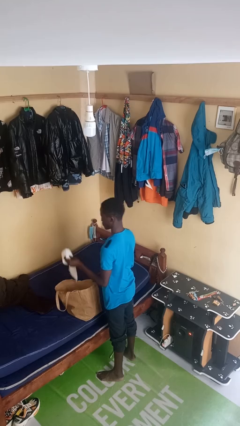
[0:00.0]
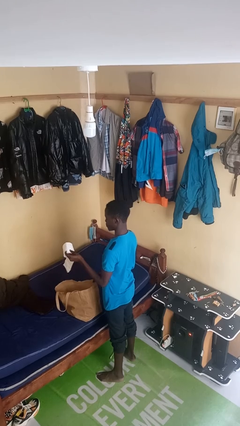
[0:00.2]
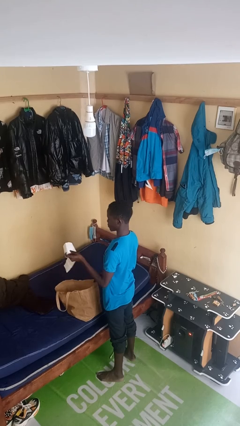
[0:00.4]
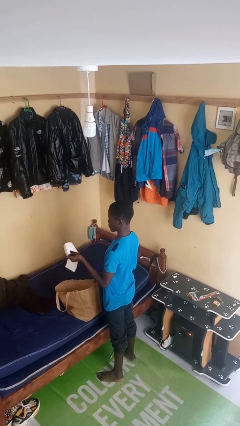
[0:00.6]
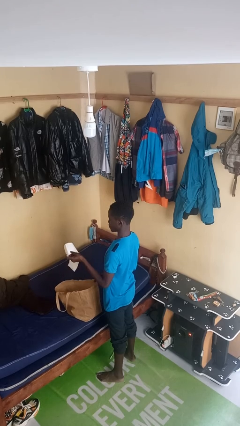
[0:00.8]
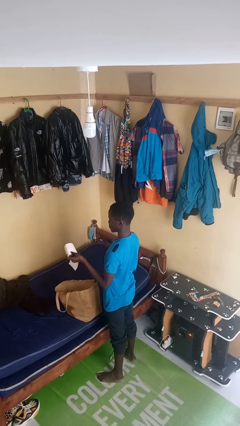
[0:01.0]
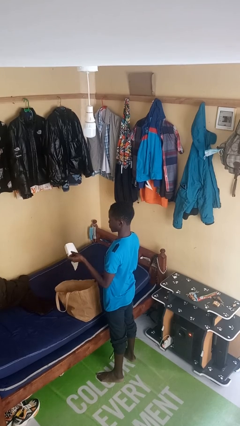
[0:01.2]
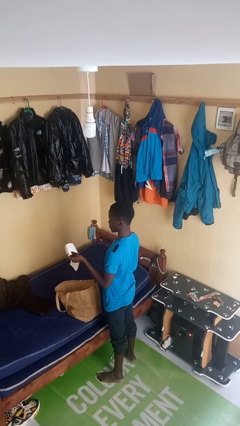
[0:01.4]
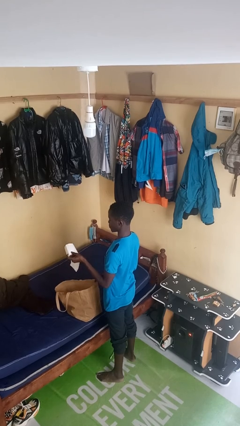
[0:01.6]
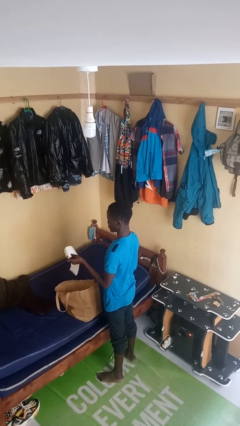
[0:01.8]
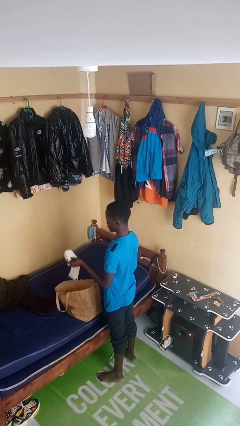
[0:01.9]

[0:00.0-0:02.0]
person takes object from bag

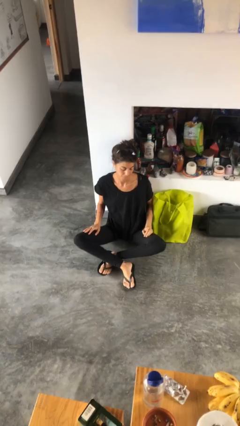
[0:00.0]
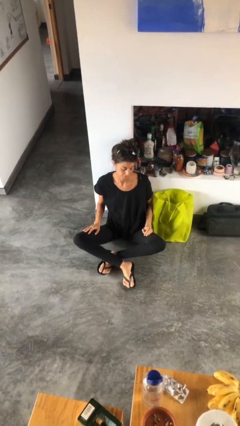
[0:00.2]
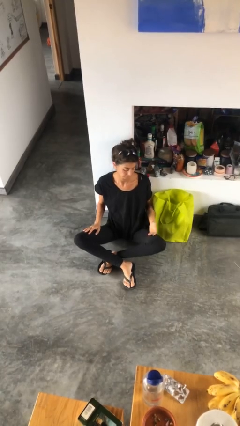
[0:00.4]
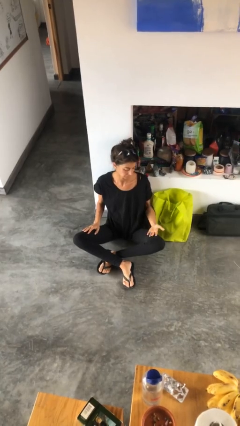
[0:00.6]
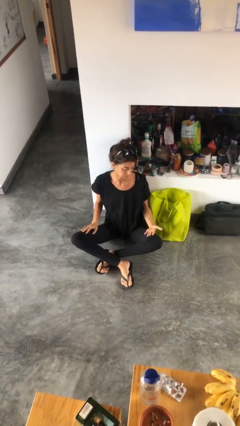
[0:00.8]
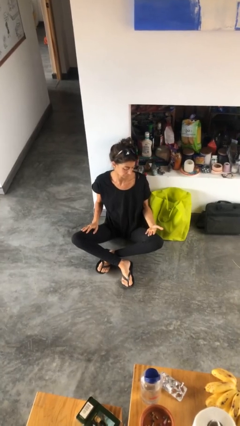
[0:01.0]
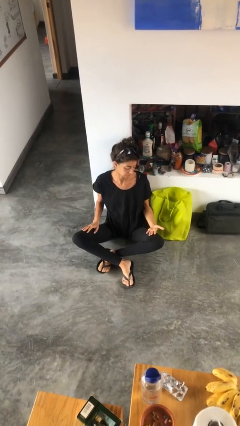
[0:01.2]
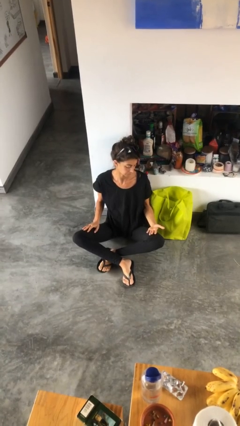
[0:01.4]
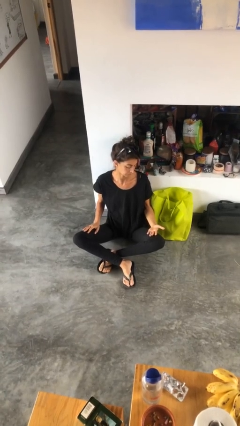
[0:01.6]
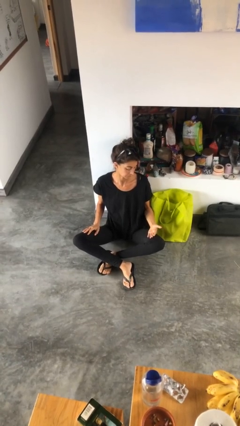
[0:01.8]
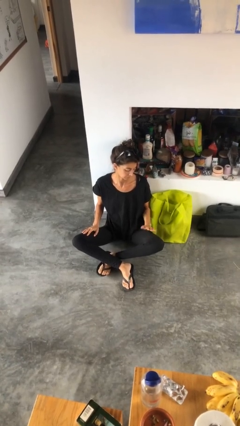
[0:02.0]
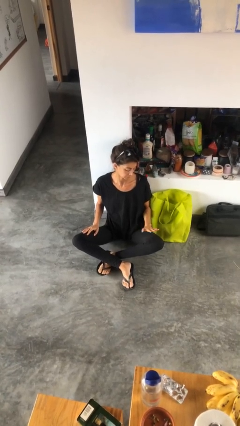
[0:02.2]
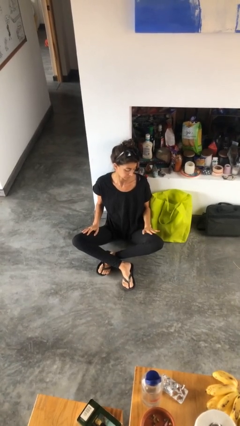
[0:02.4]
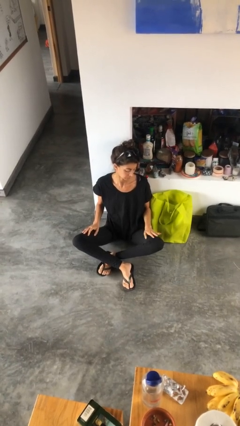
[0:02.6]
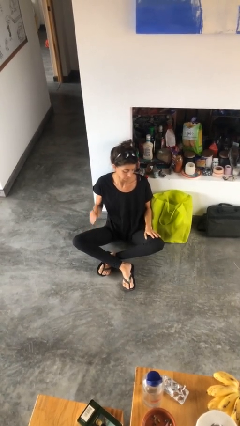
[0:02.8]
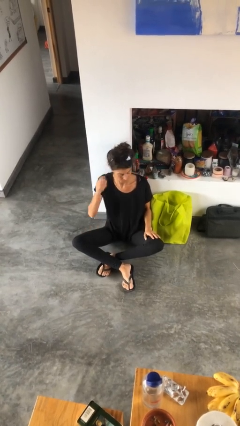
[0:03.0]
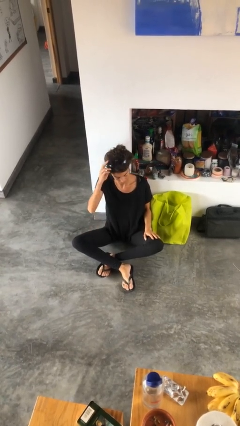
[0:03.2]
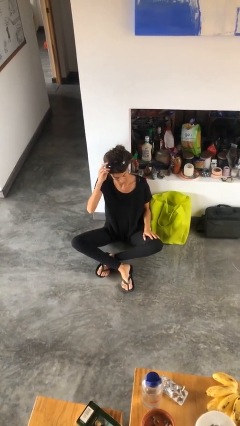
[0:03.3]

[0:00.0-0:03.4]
person looks at hands in lap

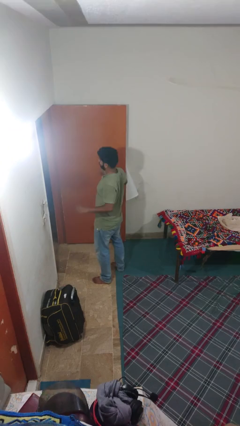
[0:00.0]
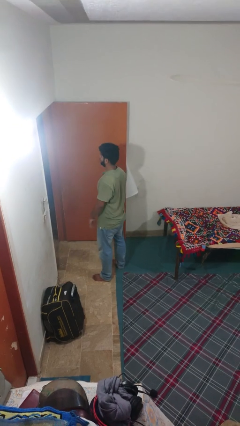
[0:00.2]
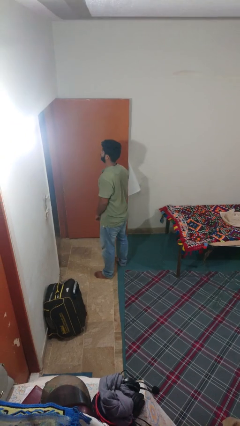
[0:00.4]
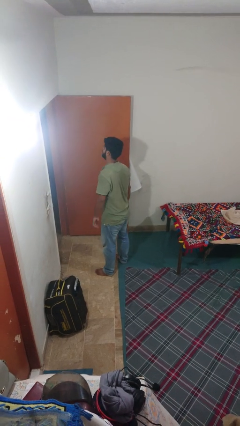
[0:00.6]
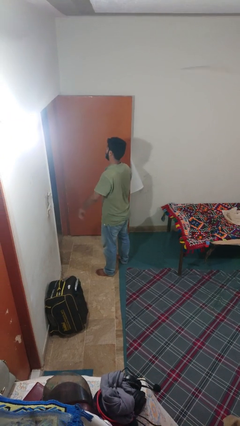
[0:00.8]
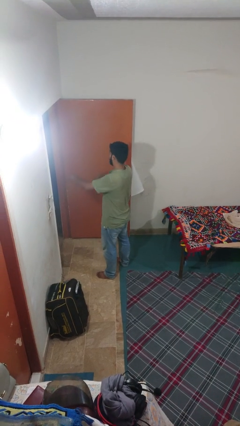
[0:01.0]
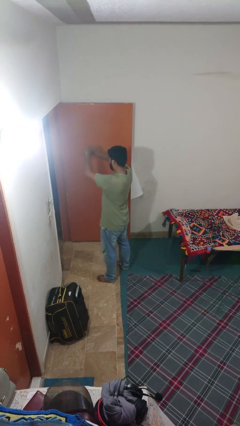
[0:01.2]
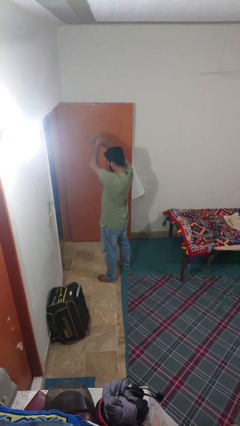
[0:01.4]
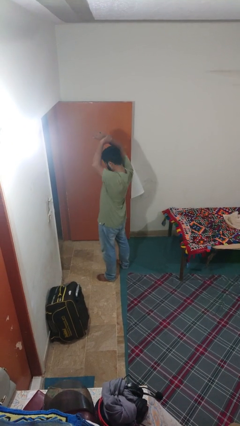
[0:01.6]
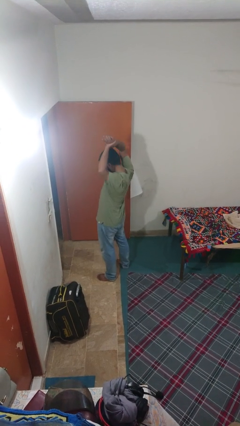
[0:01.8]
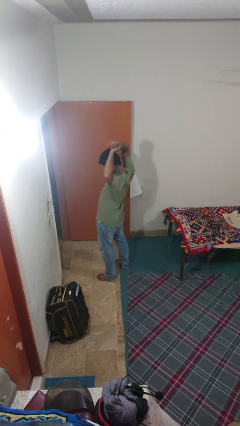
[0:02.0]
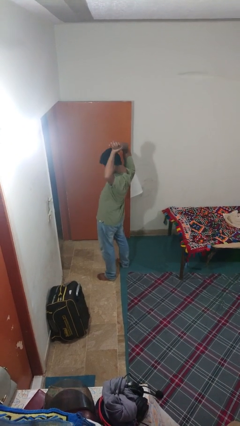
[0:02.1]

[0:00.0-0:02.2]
person stretches arms over head

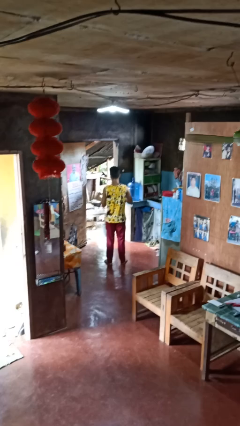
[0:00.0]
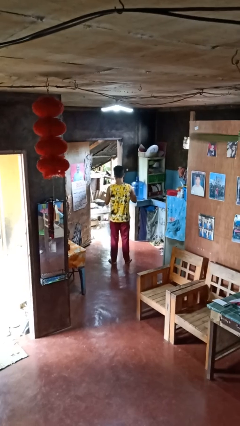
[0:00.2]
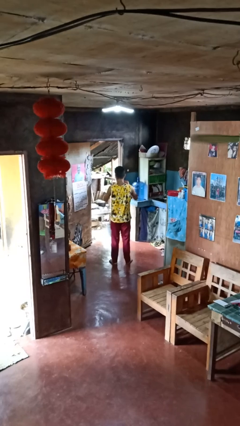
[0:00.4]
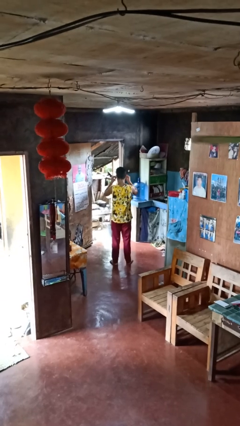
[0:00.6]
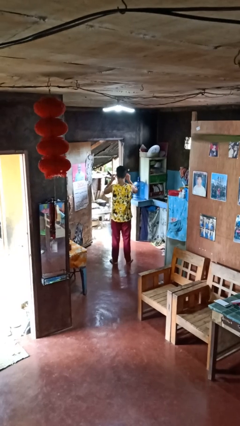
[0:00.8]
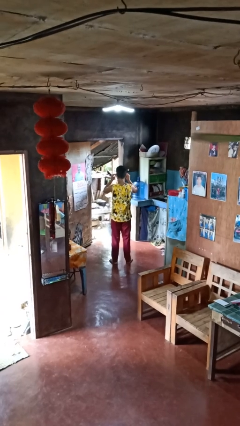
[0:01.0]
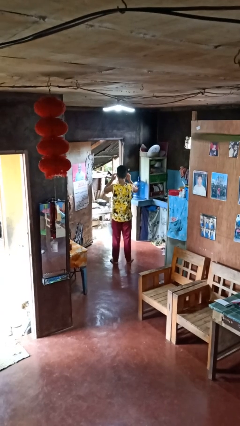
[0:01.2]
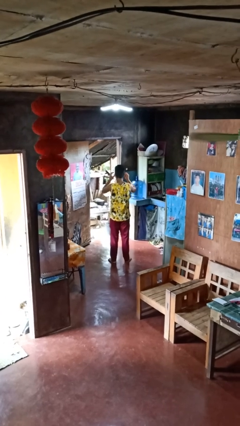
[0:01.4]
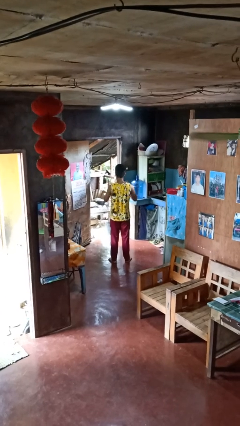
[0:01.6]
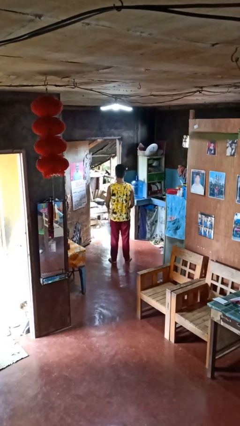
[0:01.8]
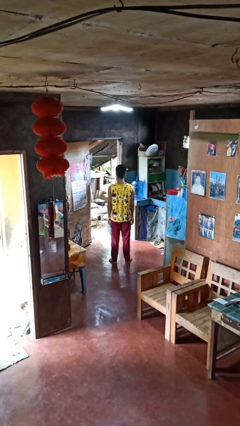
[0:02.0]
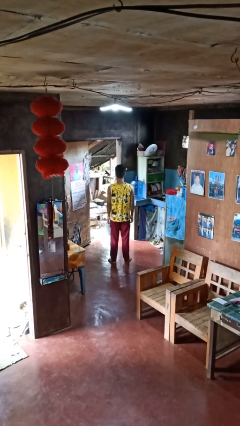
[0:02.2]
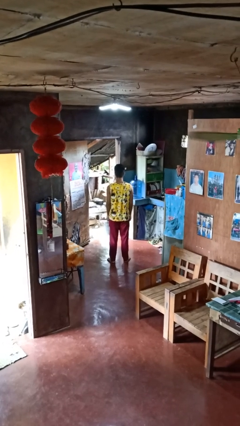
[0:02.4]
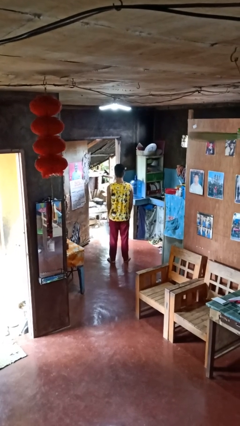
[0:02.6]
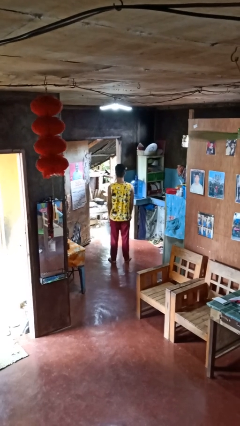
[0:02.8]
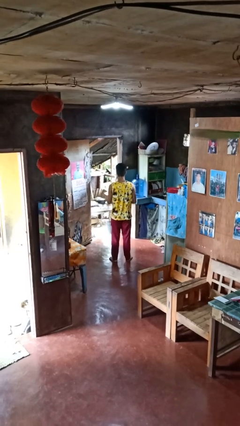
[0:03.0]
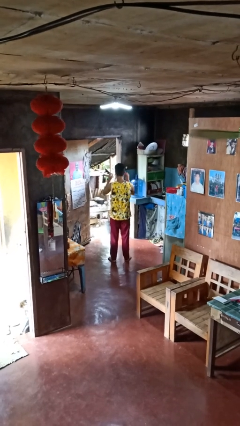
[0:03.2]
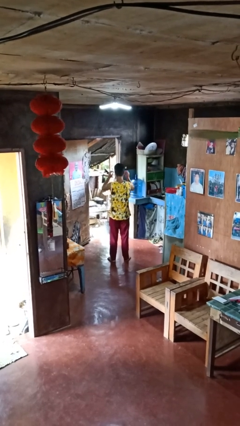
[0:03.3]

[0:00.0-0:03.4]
person puts on glasses

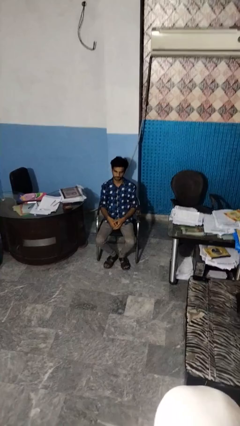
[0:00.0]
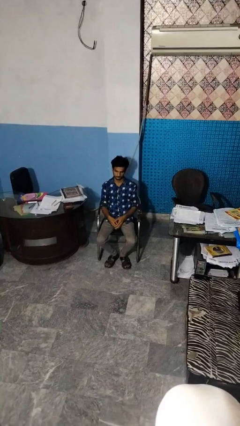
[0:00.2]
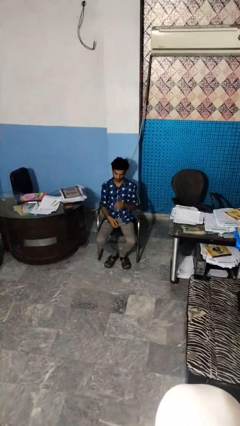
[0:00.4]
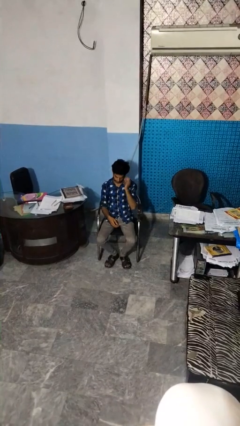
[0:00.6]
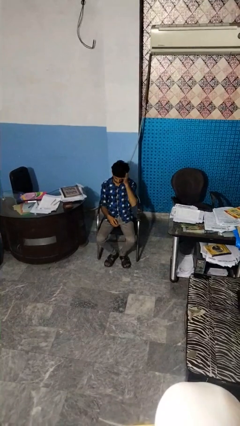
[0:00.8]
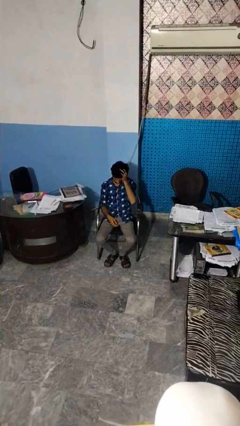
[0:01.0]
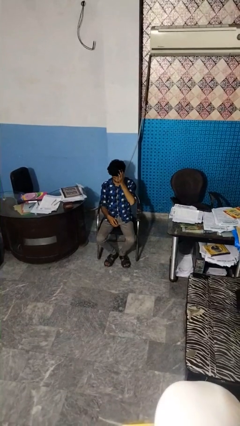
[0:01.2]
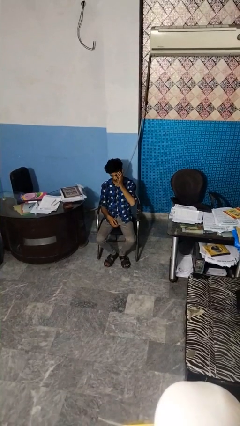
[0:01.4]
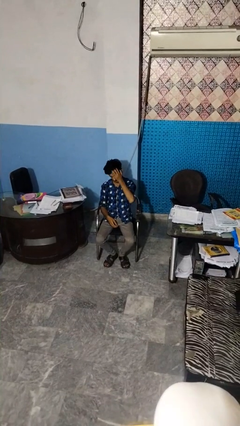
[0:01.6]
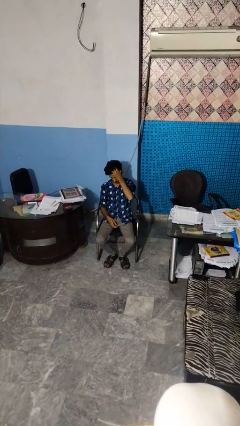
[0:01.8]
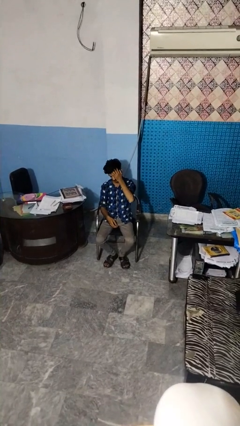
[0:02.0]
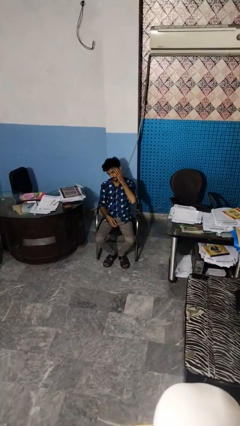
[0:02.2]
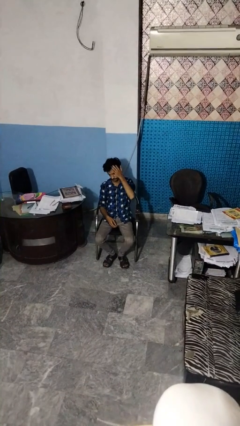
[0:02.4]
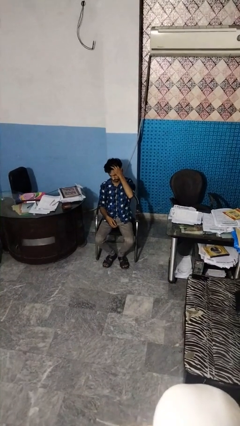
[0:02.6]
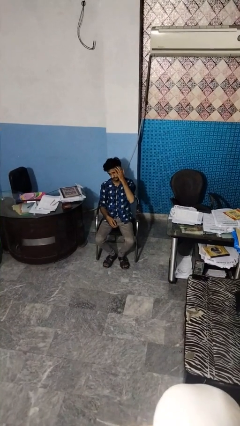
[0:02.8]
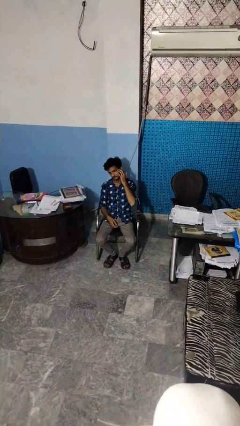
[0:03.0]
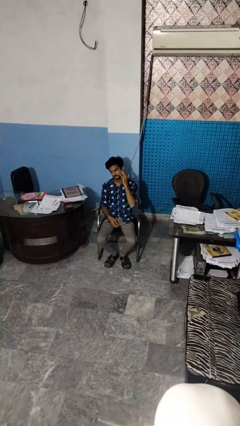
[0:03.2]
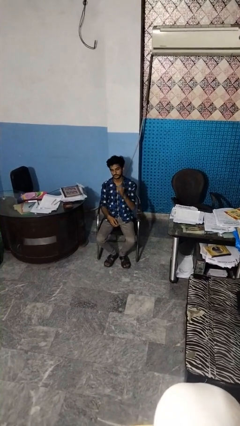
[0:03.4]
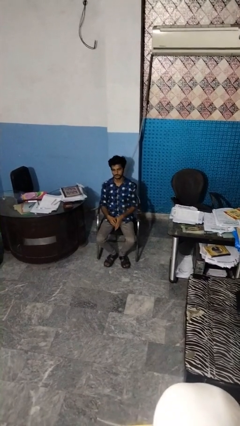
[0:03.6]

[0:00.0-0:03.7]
person scratches face

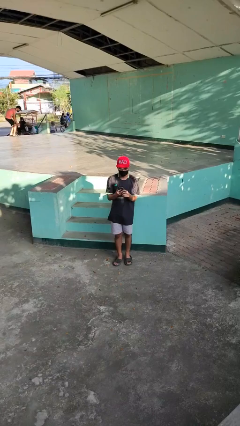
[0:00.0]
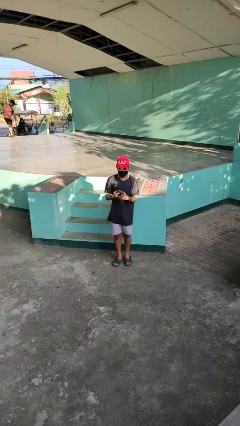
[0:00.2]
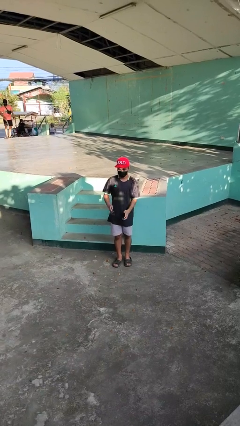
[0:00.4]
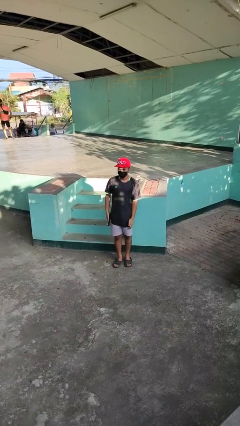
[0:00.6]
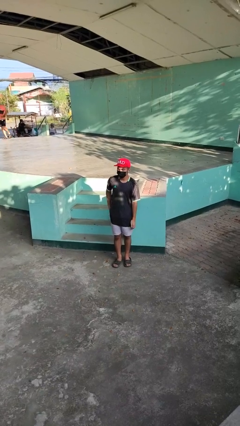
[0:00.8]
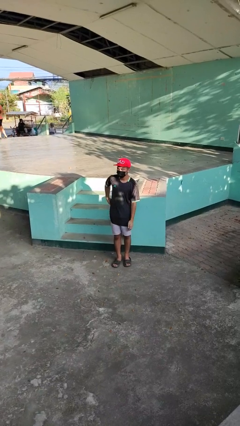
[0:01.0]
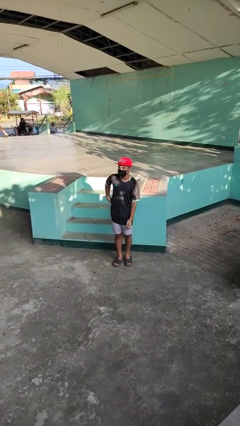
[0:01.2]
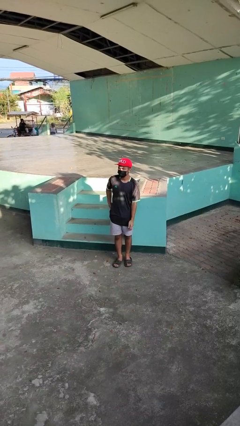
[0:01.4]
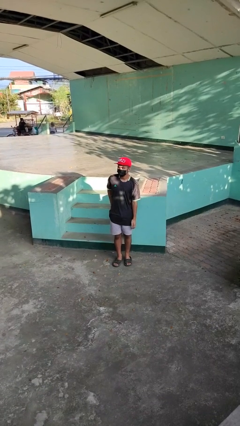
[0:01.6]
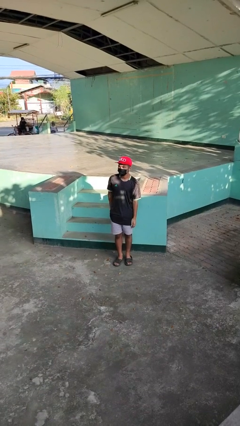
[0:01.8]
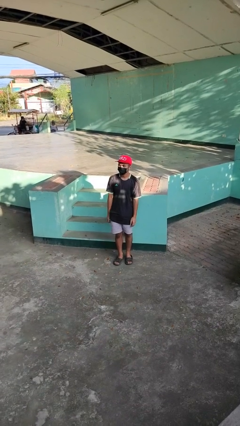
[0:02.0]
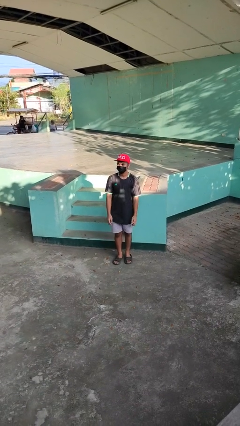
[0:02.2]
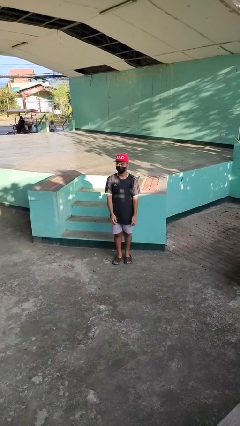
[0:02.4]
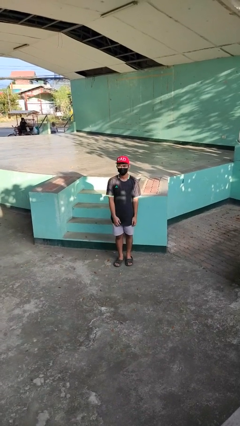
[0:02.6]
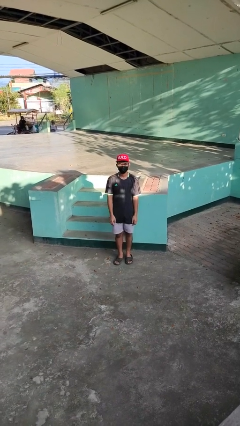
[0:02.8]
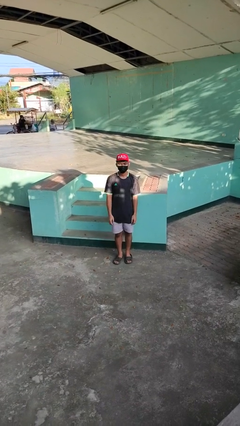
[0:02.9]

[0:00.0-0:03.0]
person puts phone into pocket
